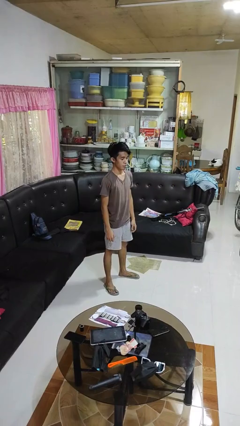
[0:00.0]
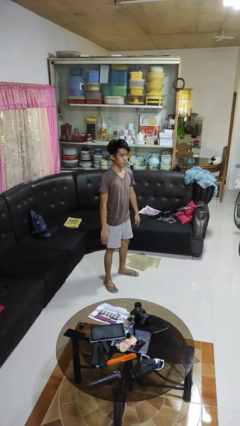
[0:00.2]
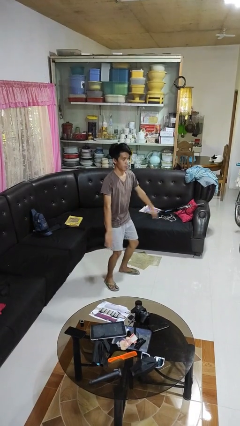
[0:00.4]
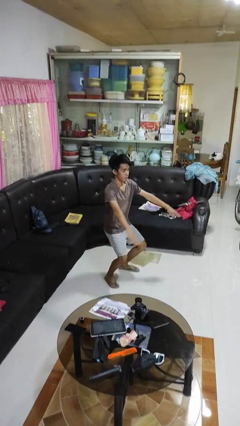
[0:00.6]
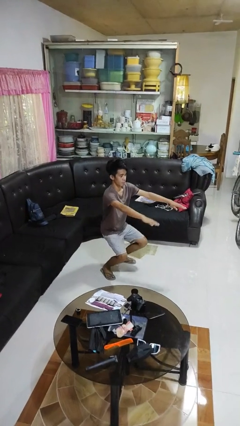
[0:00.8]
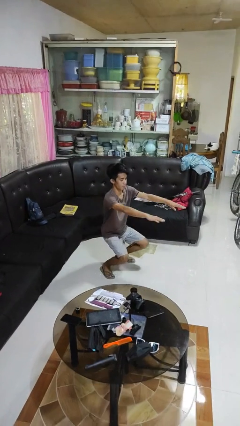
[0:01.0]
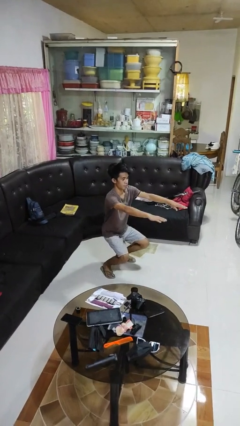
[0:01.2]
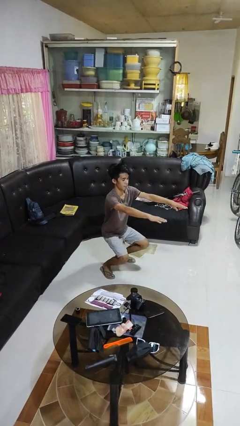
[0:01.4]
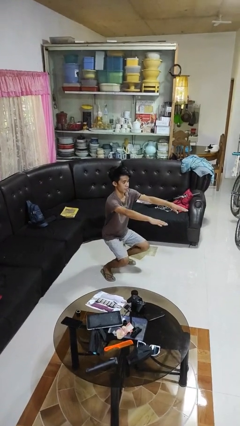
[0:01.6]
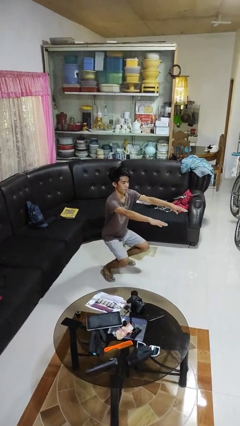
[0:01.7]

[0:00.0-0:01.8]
person squats

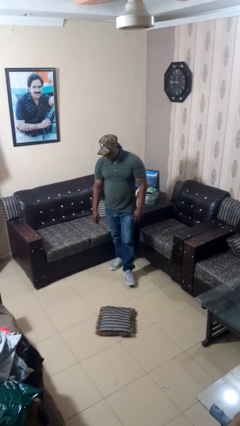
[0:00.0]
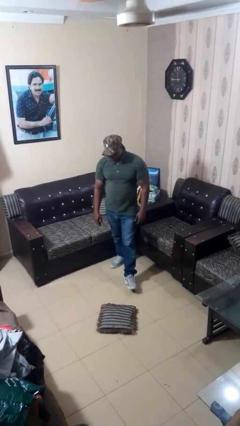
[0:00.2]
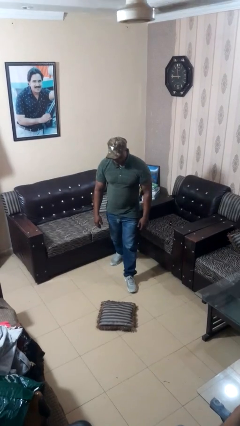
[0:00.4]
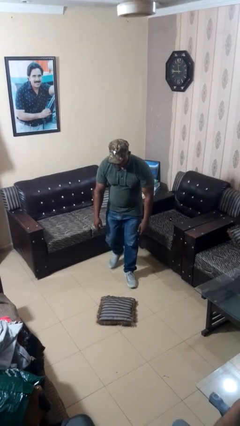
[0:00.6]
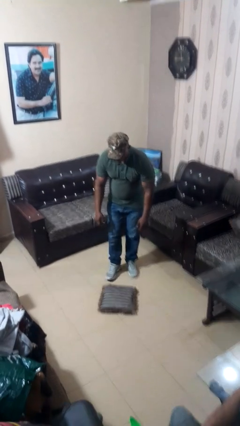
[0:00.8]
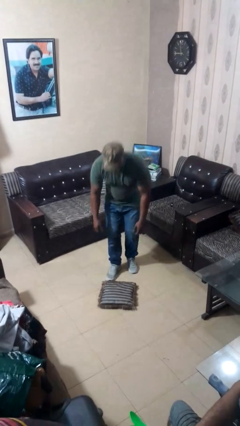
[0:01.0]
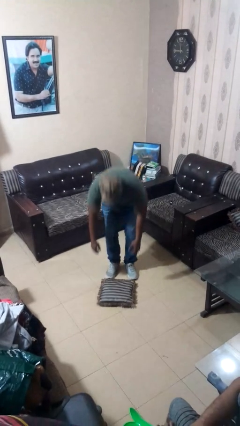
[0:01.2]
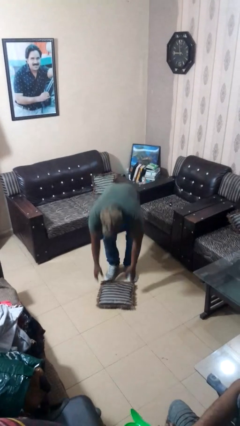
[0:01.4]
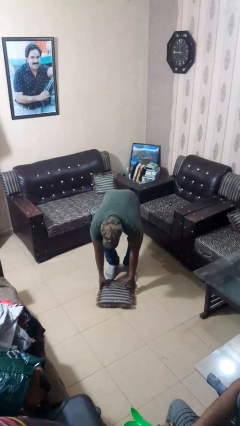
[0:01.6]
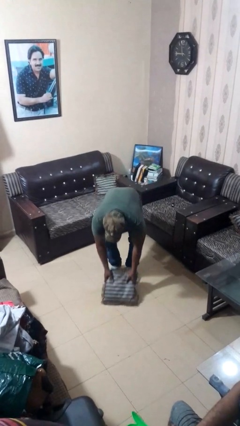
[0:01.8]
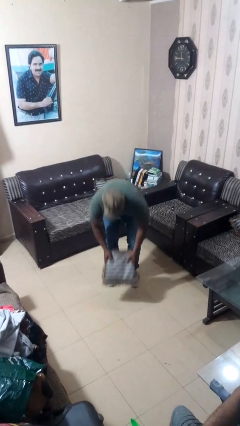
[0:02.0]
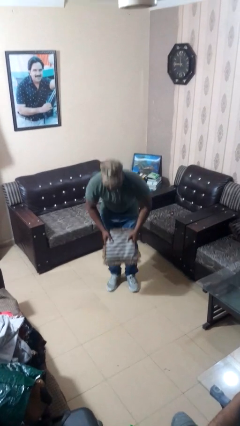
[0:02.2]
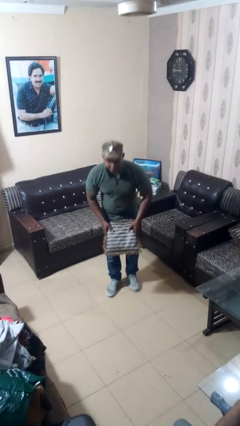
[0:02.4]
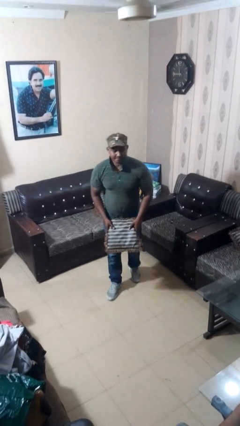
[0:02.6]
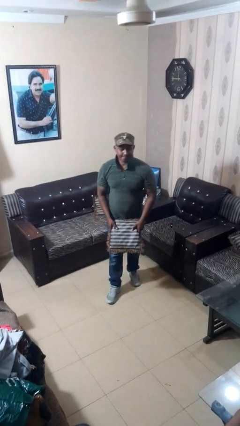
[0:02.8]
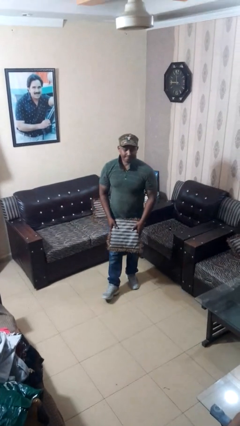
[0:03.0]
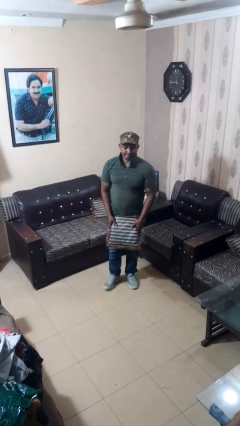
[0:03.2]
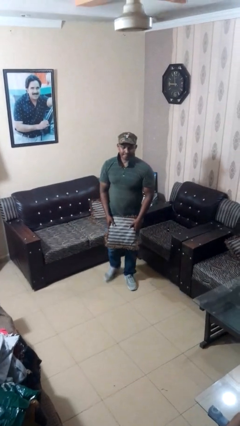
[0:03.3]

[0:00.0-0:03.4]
person picks up object from floor

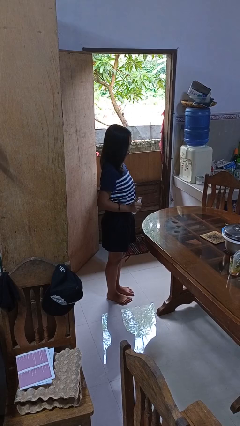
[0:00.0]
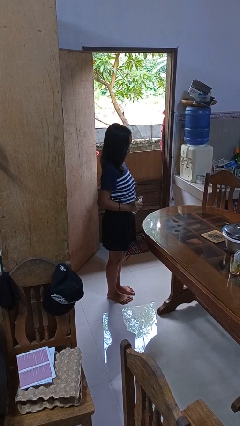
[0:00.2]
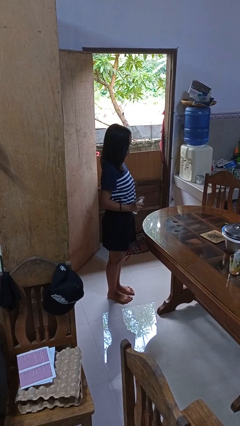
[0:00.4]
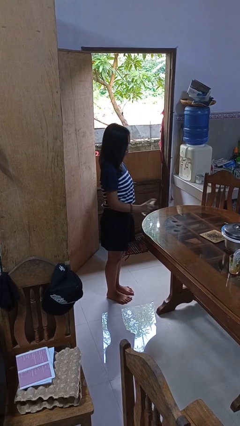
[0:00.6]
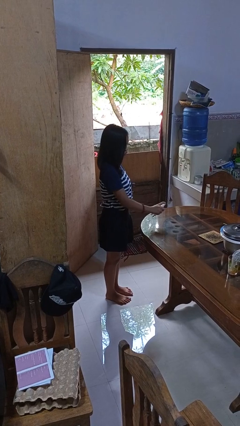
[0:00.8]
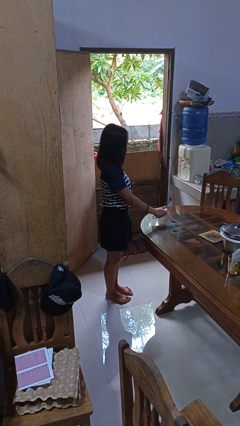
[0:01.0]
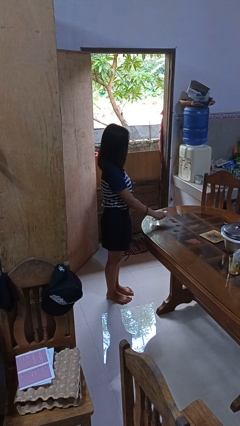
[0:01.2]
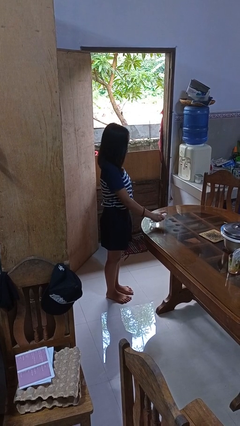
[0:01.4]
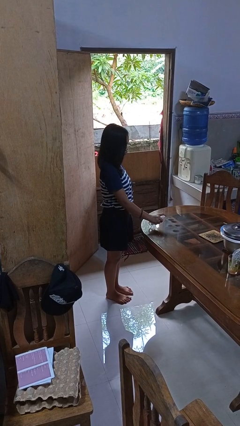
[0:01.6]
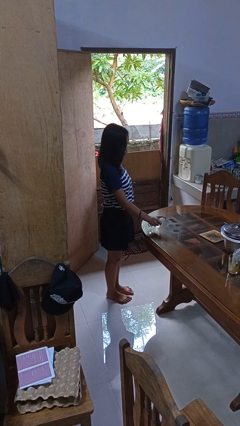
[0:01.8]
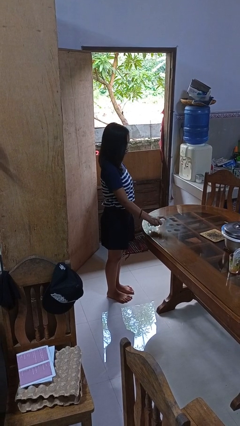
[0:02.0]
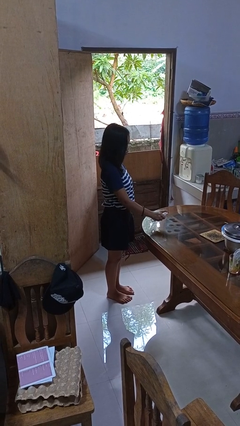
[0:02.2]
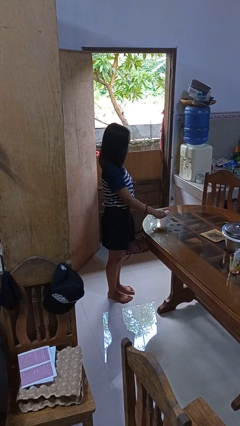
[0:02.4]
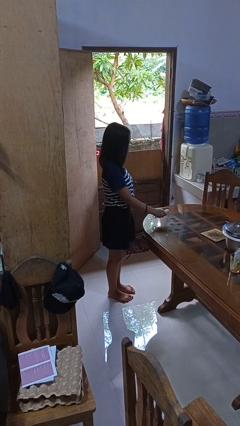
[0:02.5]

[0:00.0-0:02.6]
person sprays from bottle

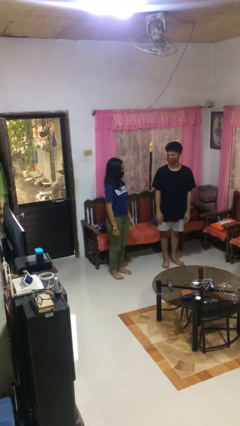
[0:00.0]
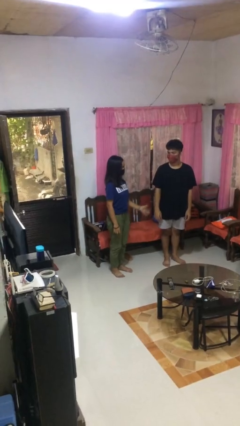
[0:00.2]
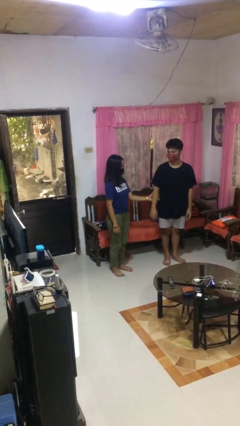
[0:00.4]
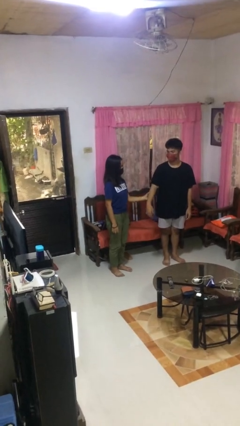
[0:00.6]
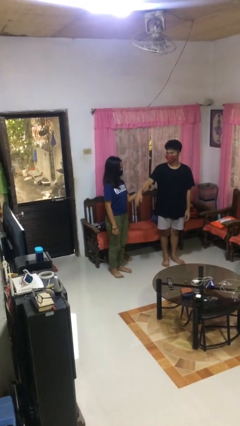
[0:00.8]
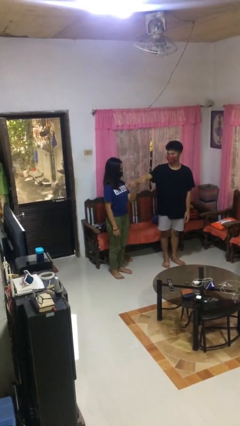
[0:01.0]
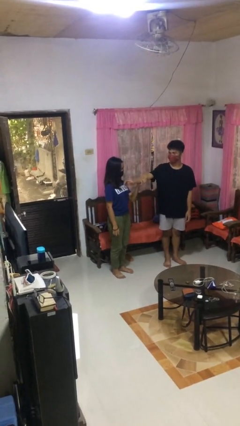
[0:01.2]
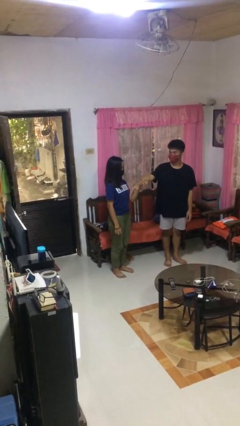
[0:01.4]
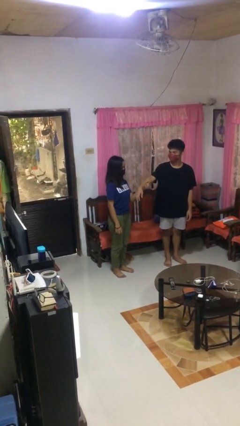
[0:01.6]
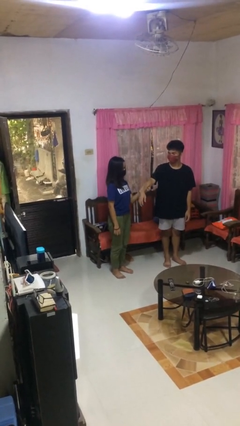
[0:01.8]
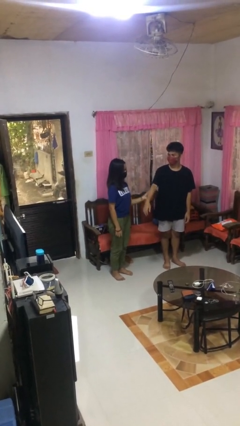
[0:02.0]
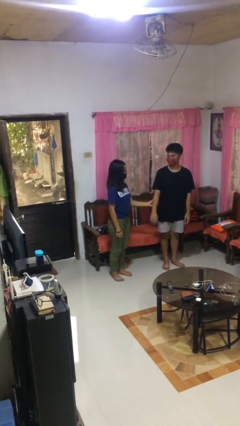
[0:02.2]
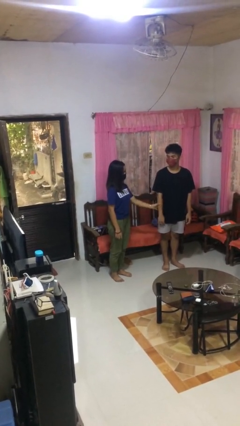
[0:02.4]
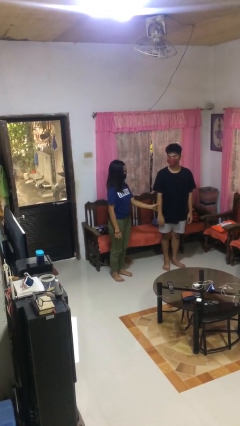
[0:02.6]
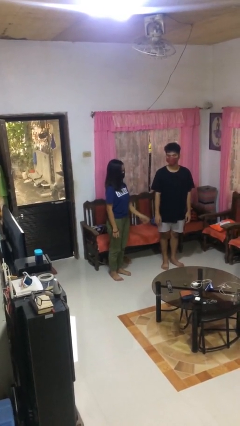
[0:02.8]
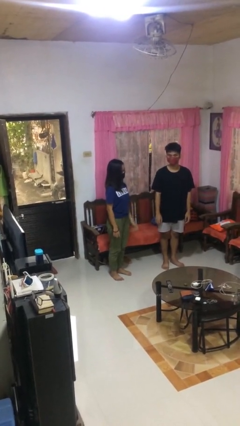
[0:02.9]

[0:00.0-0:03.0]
person grabs person by forearm

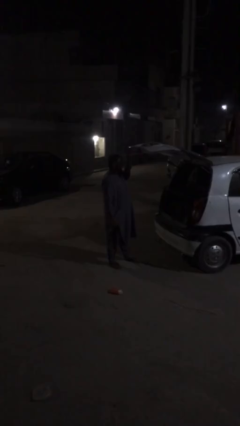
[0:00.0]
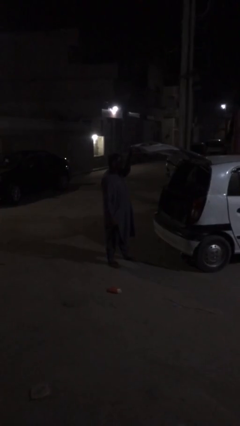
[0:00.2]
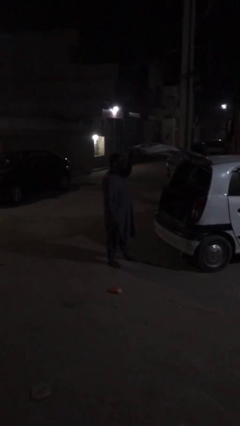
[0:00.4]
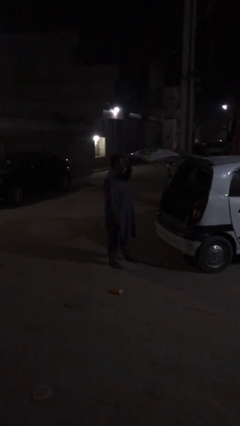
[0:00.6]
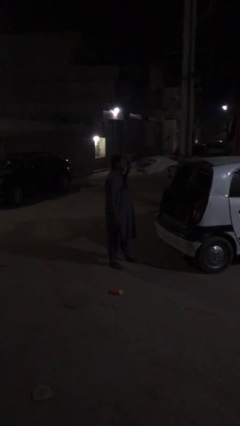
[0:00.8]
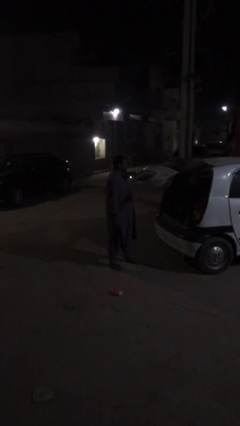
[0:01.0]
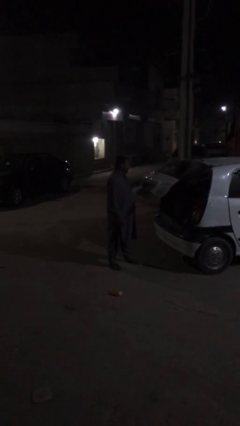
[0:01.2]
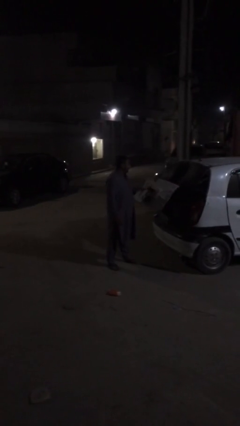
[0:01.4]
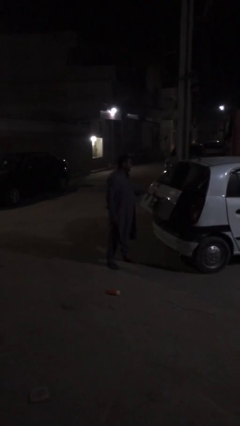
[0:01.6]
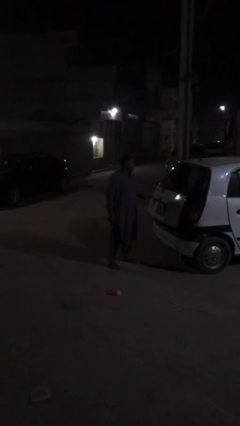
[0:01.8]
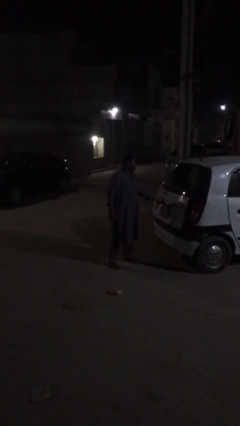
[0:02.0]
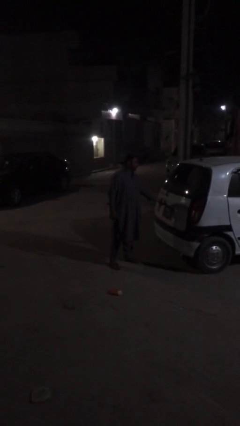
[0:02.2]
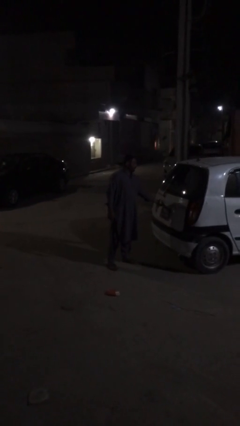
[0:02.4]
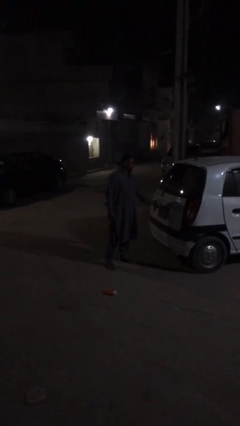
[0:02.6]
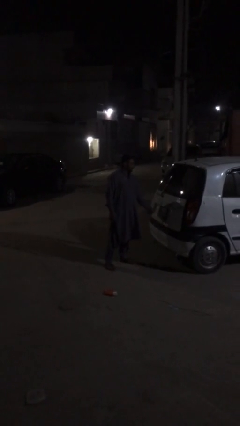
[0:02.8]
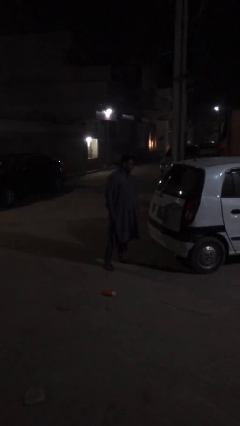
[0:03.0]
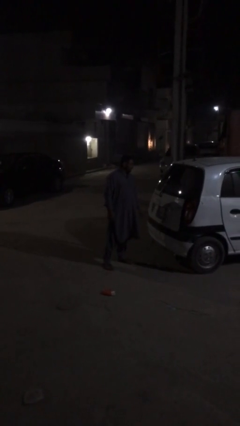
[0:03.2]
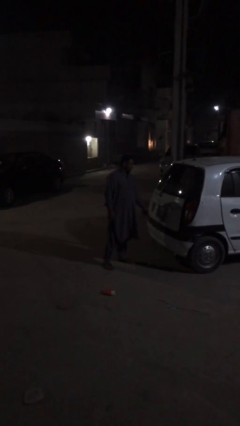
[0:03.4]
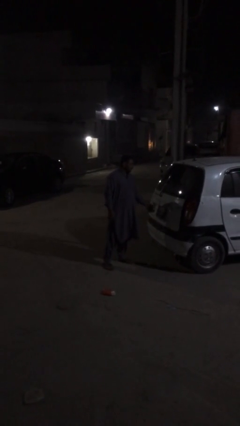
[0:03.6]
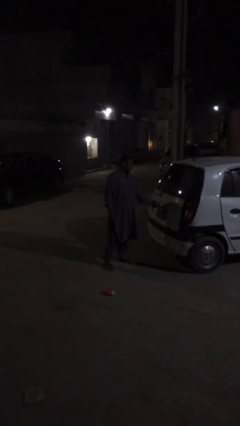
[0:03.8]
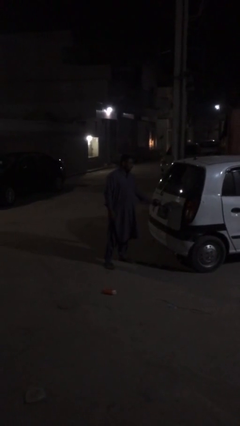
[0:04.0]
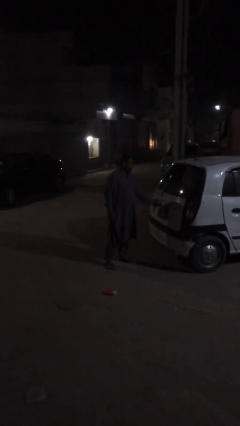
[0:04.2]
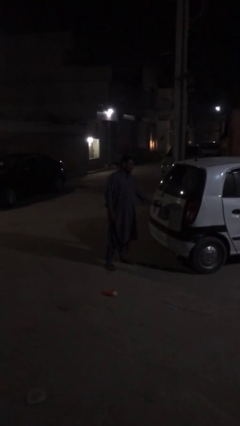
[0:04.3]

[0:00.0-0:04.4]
person closes car trunk

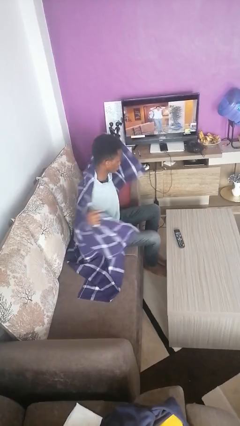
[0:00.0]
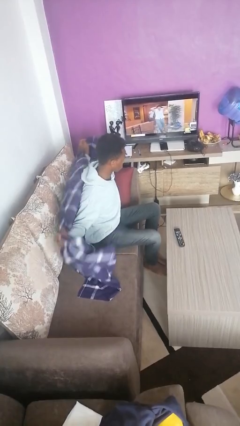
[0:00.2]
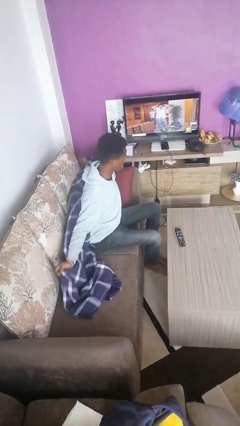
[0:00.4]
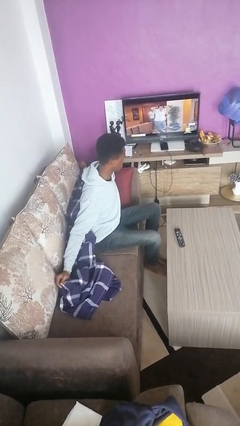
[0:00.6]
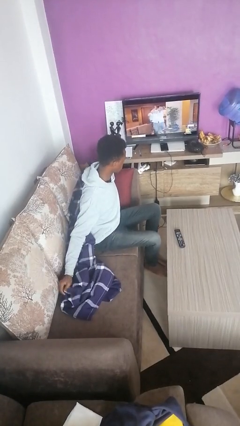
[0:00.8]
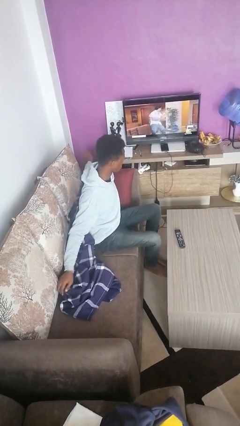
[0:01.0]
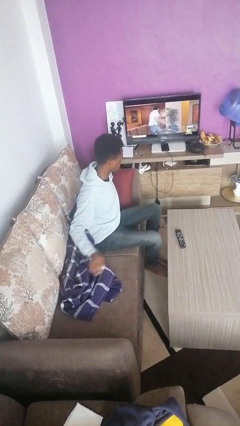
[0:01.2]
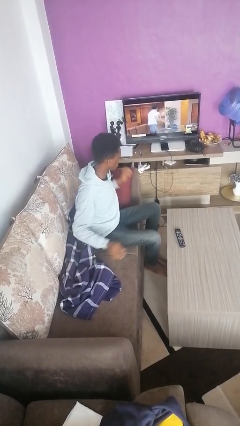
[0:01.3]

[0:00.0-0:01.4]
person uncovers with blanket

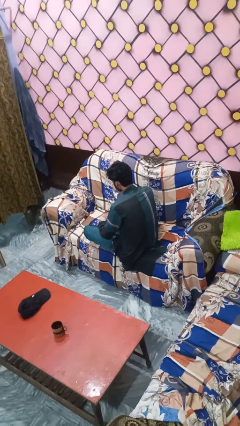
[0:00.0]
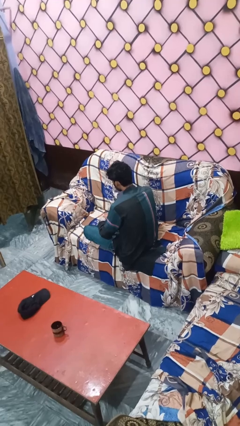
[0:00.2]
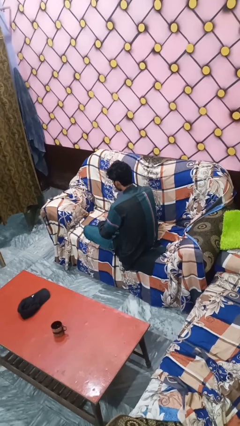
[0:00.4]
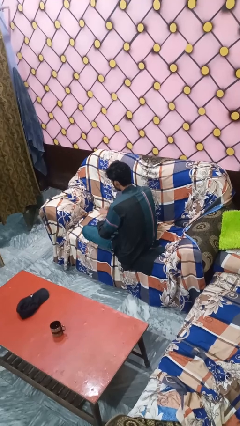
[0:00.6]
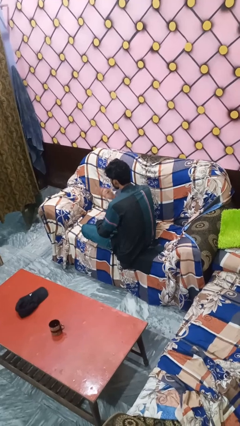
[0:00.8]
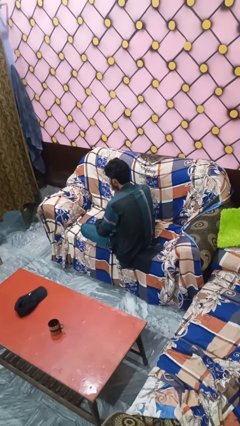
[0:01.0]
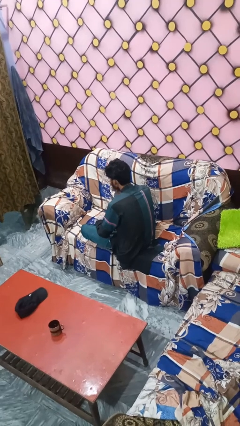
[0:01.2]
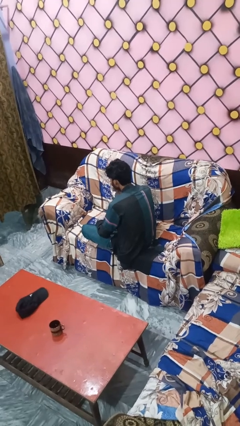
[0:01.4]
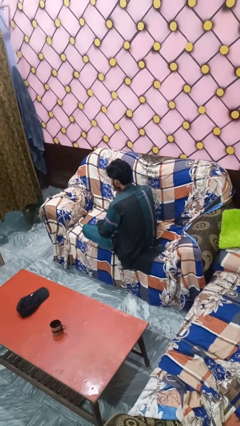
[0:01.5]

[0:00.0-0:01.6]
person gestures blow kiss
